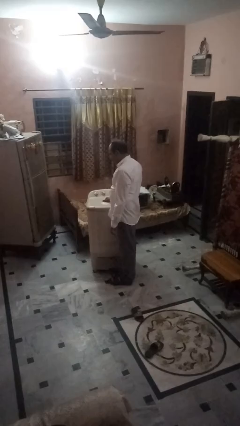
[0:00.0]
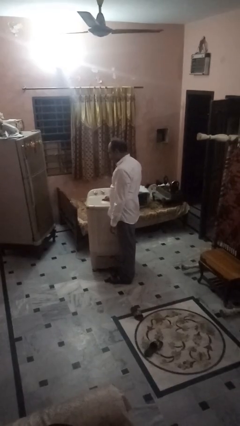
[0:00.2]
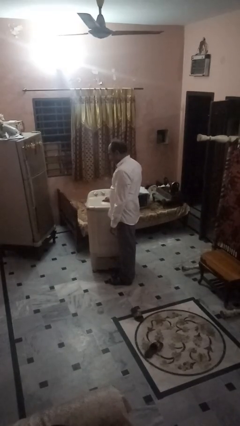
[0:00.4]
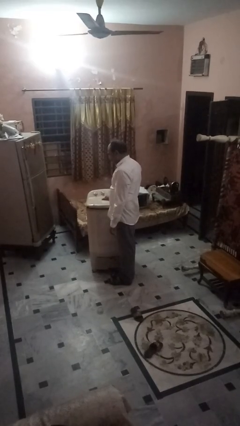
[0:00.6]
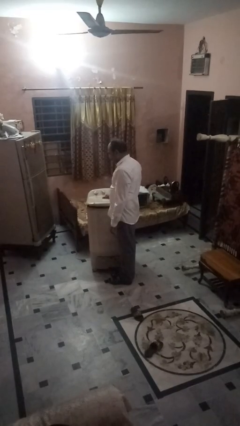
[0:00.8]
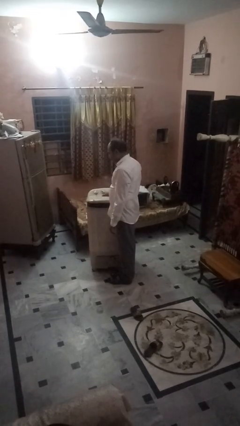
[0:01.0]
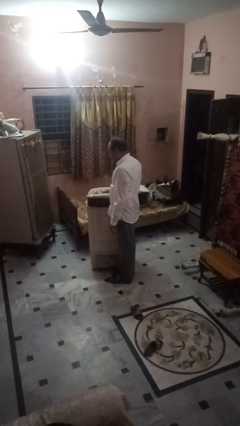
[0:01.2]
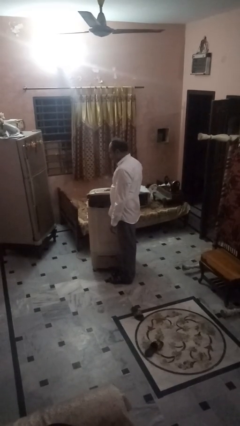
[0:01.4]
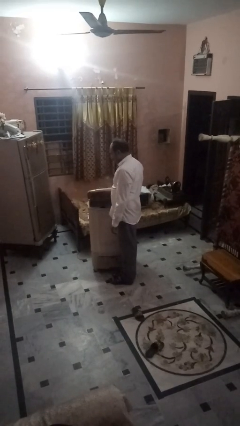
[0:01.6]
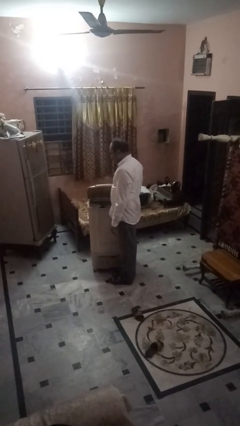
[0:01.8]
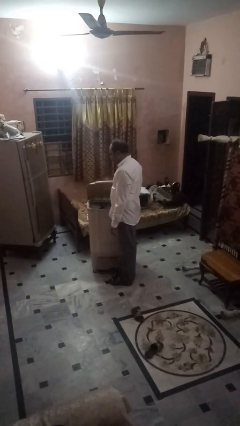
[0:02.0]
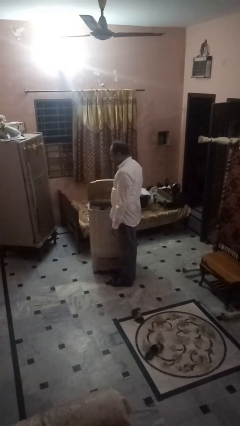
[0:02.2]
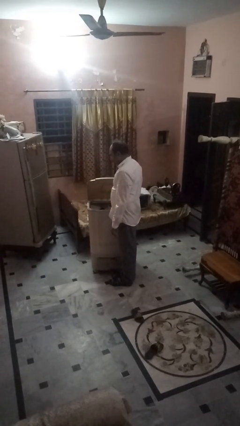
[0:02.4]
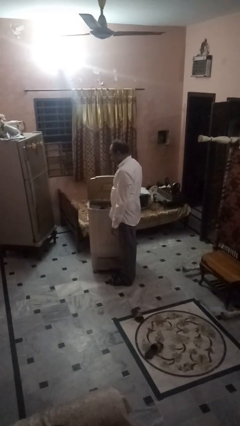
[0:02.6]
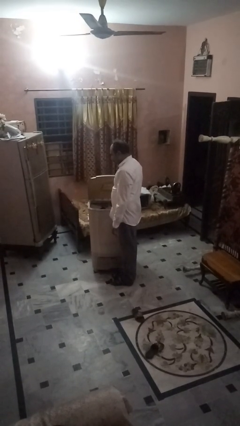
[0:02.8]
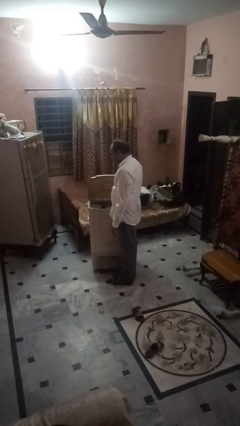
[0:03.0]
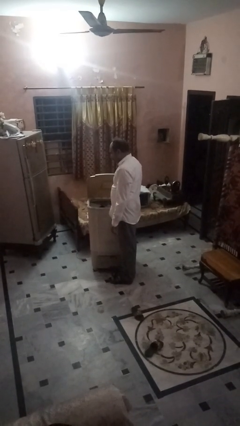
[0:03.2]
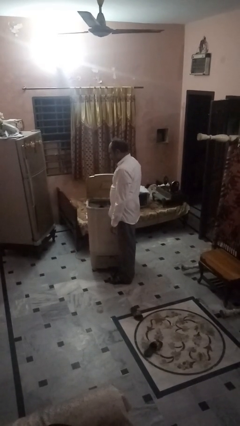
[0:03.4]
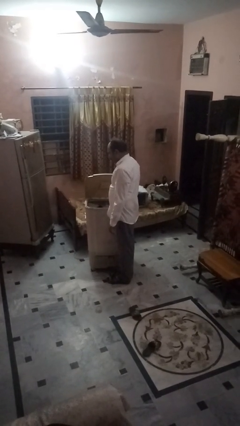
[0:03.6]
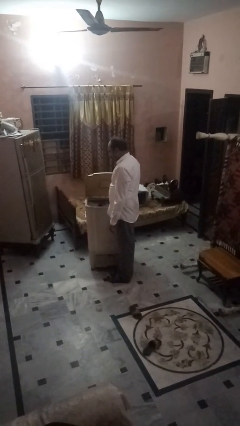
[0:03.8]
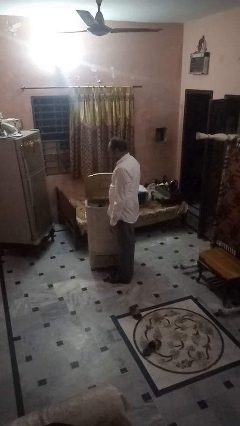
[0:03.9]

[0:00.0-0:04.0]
person opens clothes washer

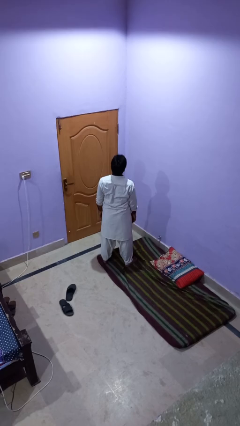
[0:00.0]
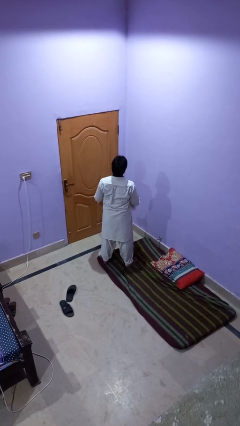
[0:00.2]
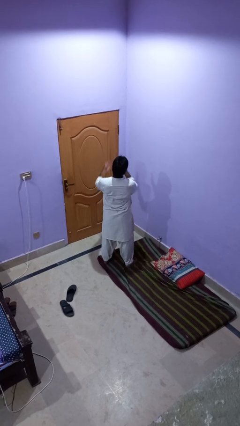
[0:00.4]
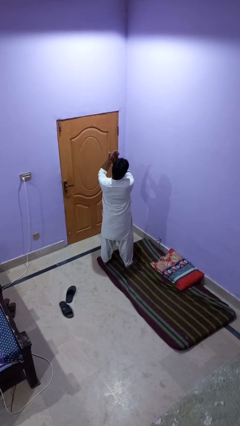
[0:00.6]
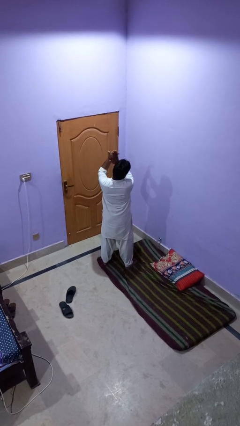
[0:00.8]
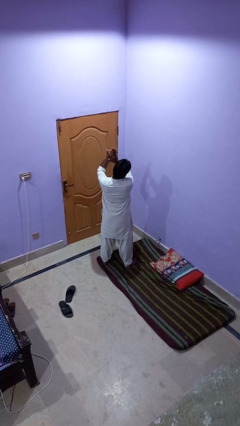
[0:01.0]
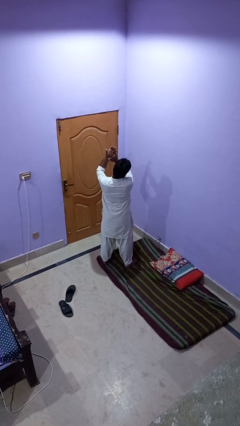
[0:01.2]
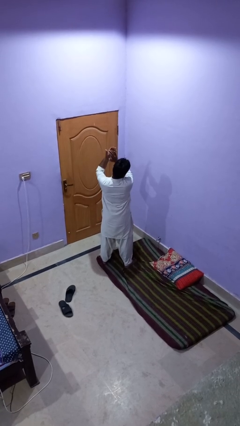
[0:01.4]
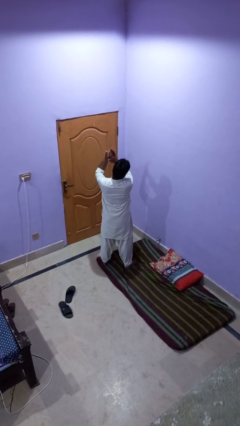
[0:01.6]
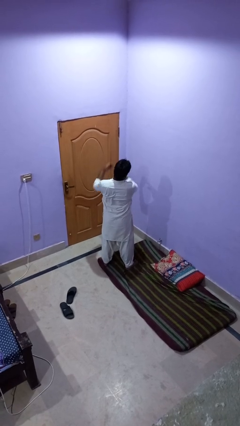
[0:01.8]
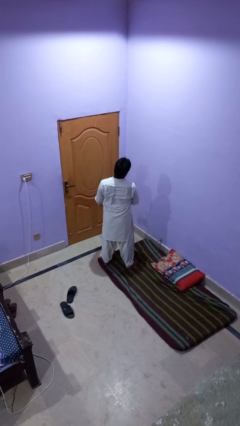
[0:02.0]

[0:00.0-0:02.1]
person claps hands

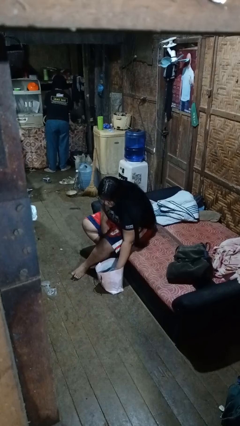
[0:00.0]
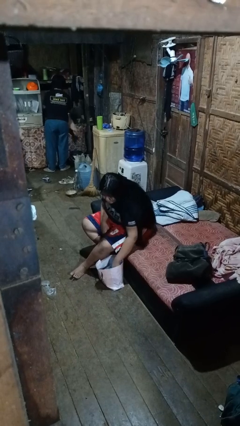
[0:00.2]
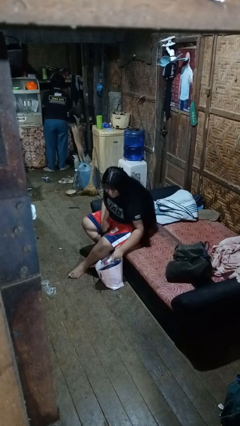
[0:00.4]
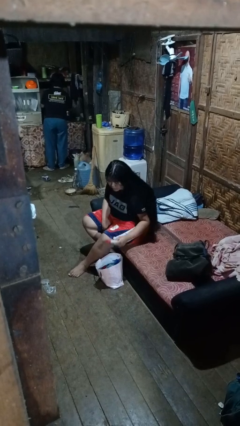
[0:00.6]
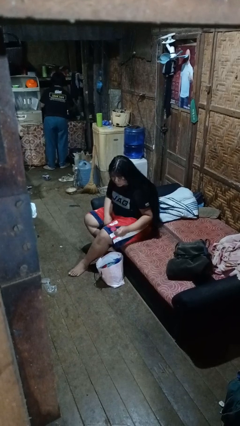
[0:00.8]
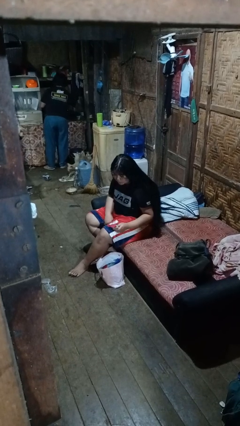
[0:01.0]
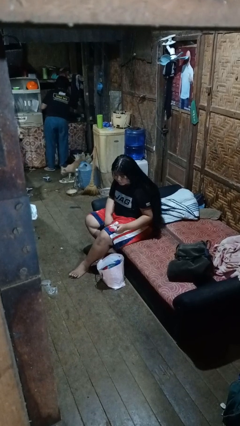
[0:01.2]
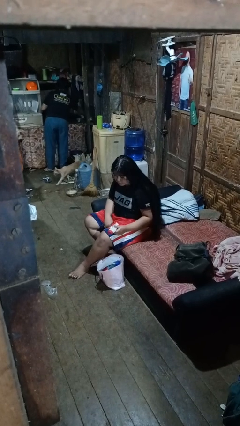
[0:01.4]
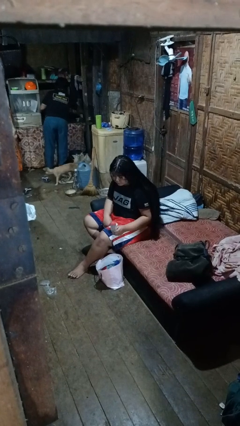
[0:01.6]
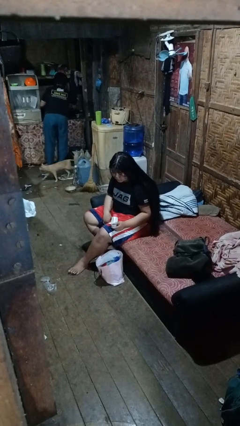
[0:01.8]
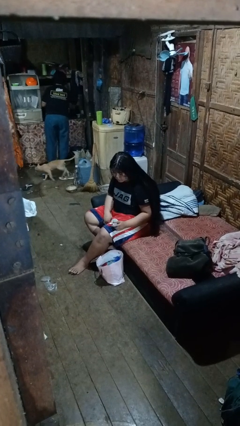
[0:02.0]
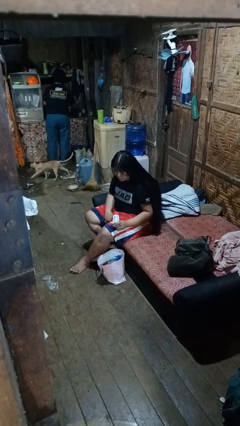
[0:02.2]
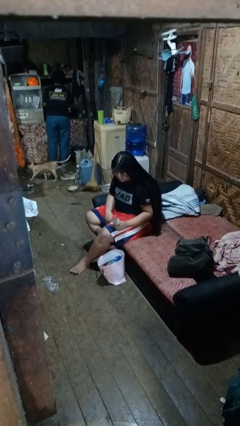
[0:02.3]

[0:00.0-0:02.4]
person takes object from bag

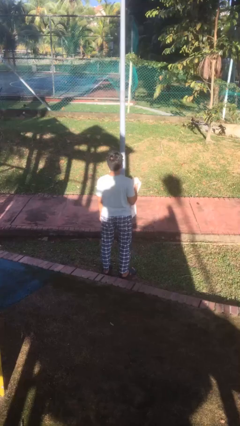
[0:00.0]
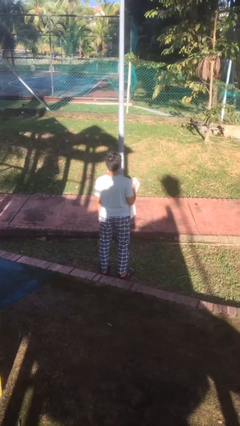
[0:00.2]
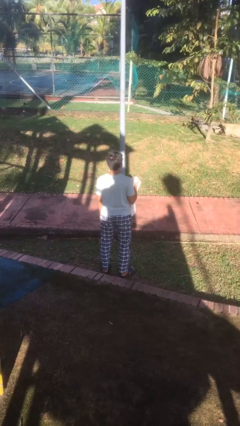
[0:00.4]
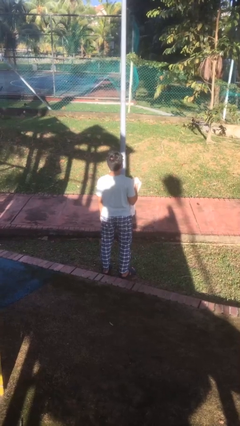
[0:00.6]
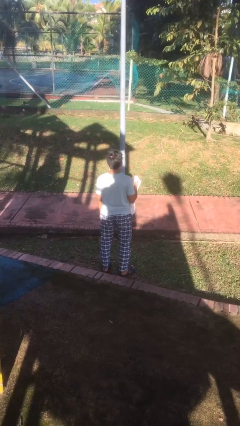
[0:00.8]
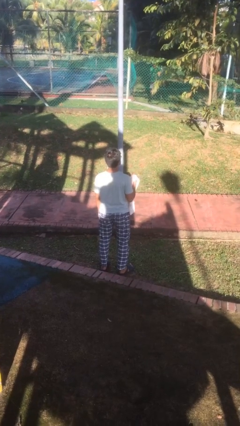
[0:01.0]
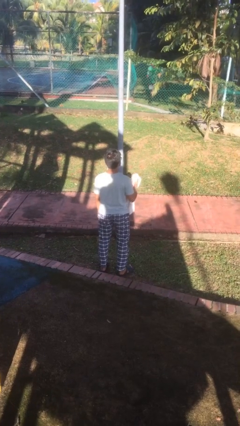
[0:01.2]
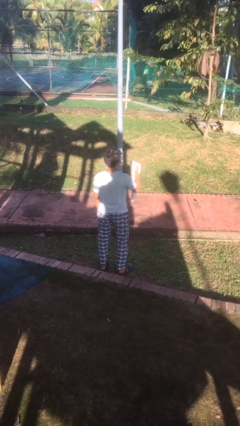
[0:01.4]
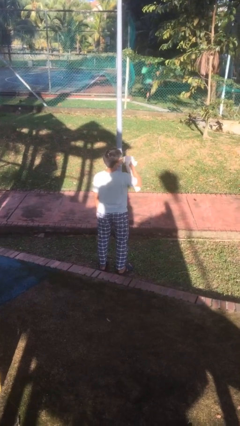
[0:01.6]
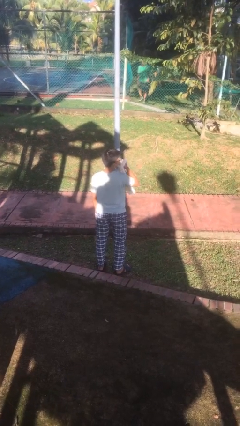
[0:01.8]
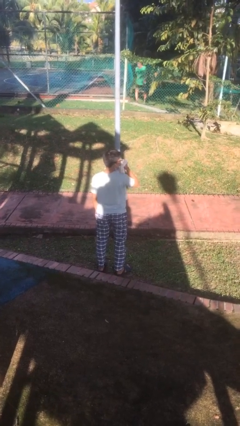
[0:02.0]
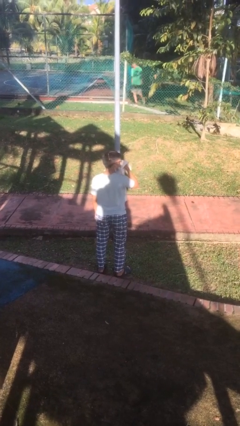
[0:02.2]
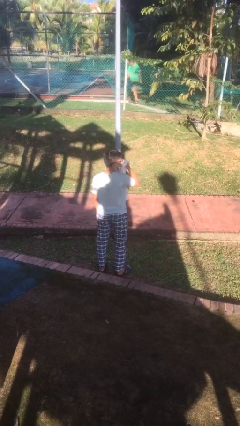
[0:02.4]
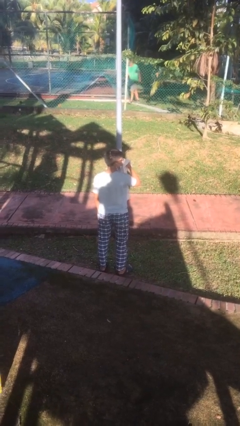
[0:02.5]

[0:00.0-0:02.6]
person blows nose

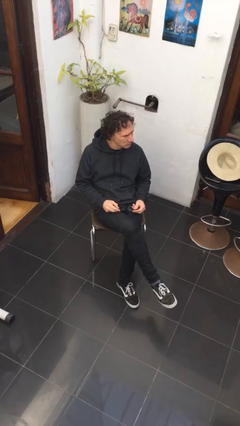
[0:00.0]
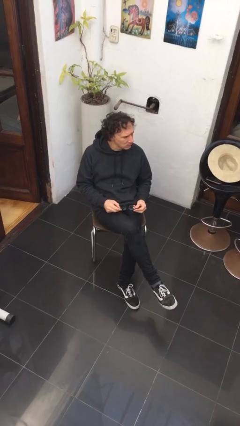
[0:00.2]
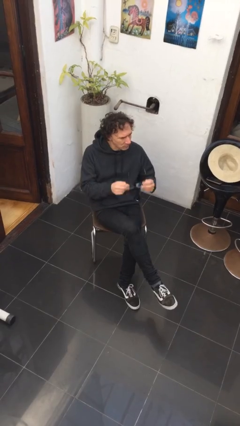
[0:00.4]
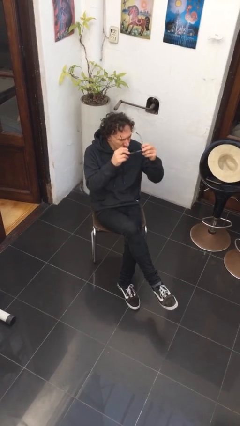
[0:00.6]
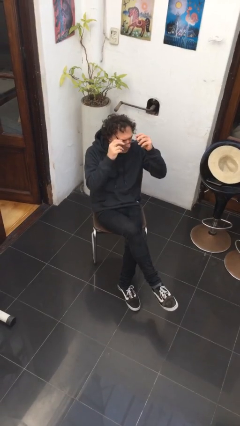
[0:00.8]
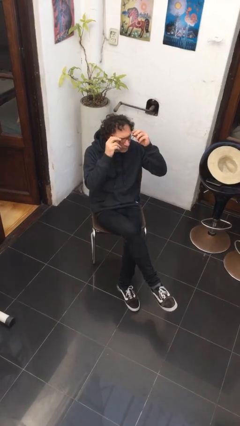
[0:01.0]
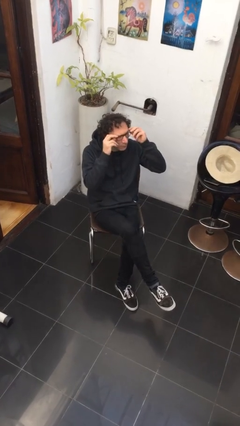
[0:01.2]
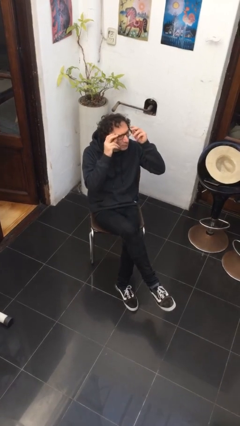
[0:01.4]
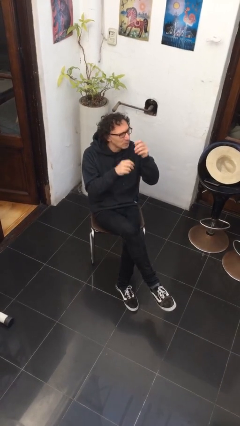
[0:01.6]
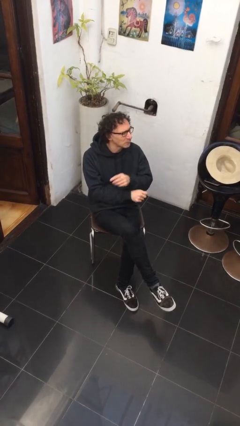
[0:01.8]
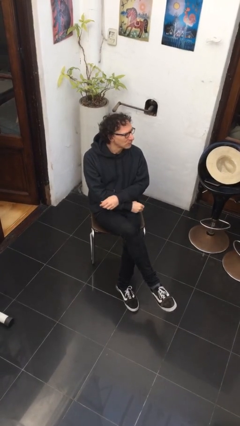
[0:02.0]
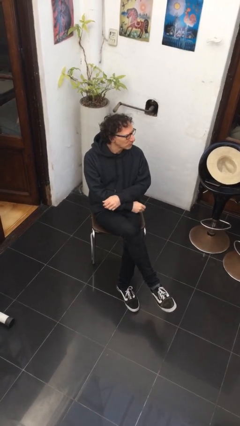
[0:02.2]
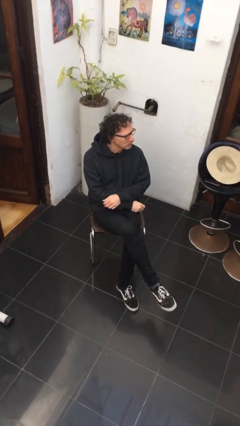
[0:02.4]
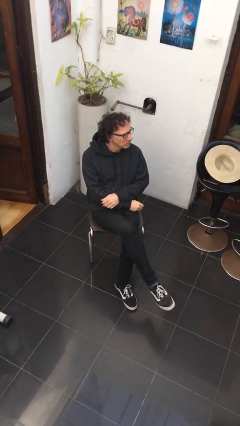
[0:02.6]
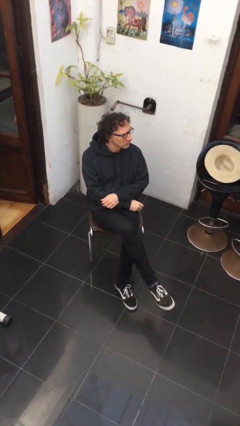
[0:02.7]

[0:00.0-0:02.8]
person puts on glasses

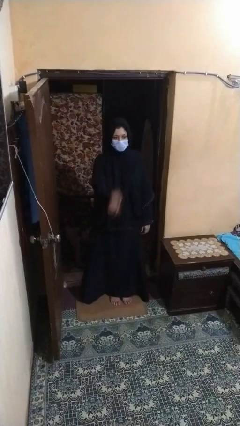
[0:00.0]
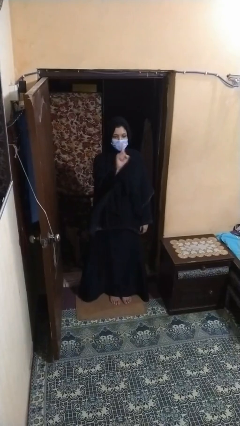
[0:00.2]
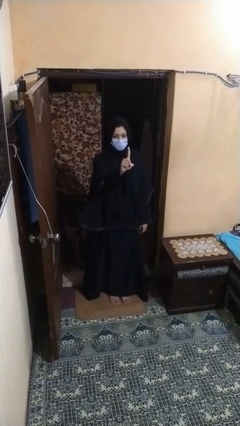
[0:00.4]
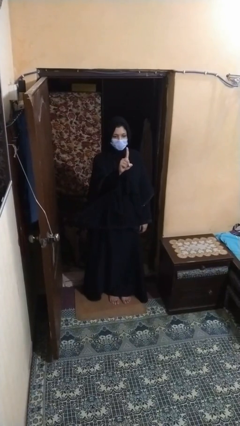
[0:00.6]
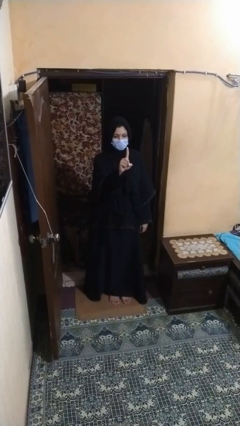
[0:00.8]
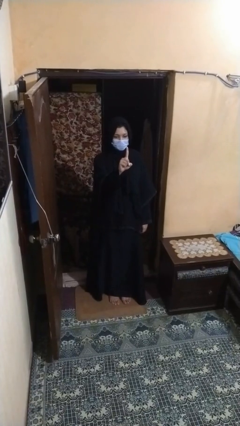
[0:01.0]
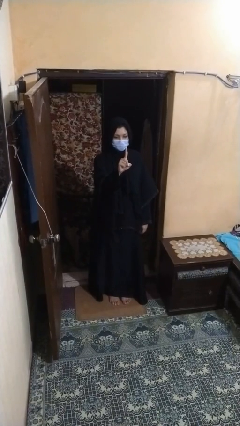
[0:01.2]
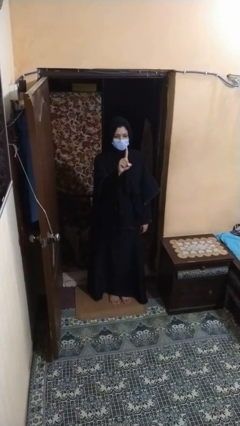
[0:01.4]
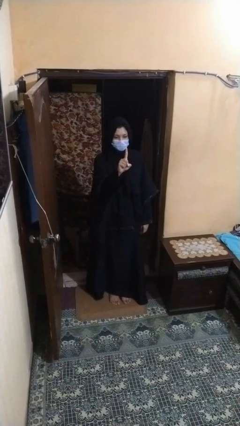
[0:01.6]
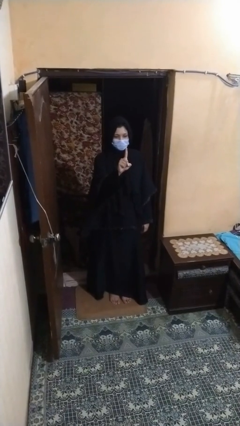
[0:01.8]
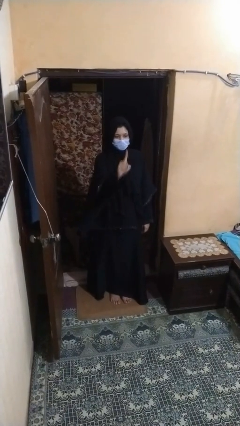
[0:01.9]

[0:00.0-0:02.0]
person gestures number one

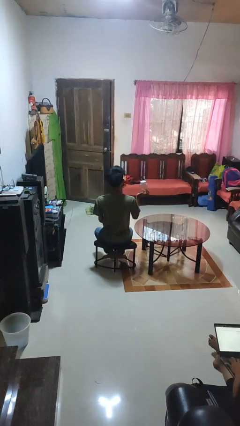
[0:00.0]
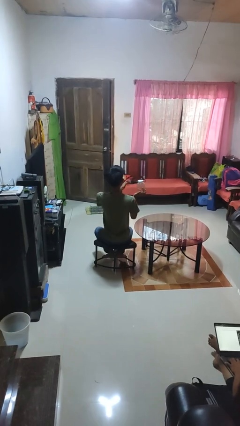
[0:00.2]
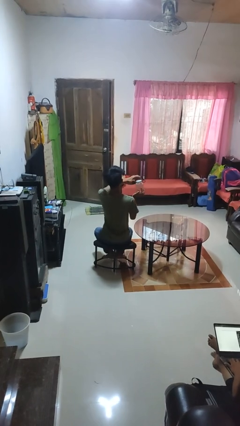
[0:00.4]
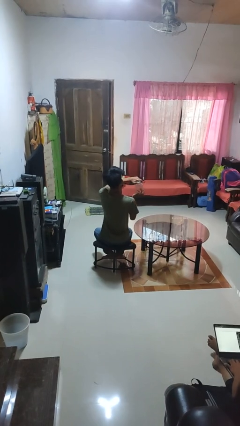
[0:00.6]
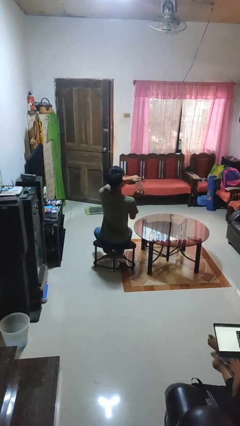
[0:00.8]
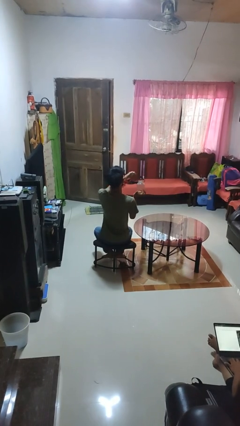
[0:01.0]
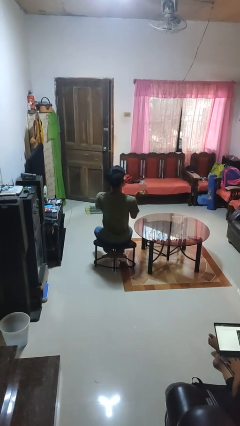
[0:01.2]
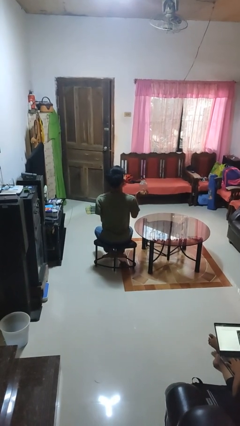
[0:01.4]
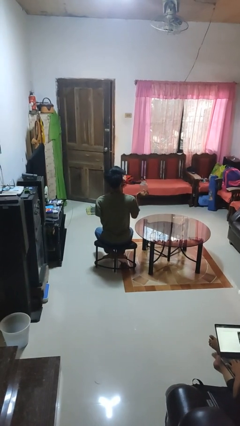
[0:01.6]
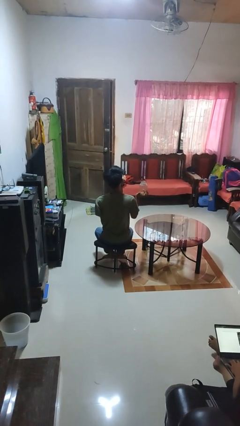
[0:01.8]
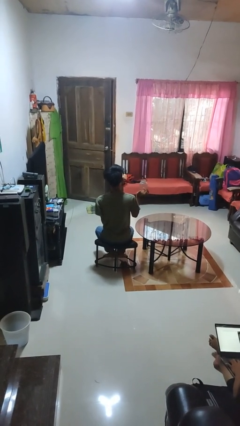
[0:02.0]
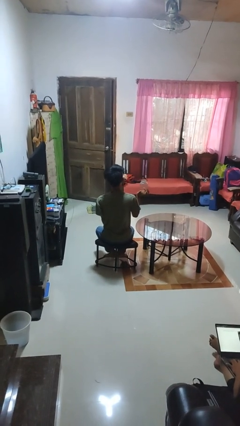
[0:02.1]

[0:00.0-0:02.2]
person opens jar
